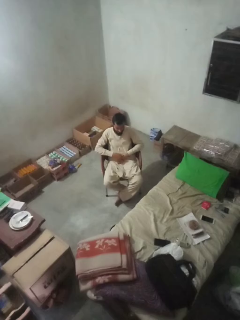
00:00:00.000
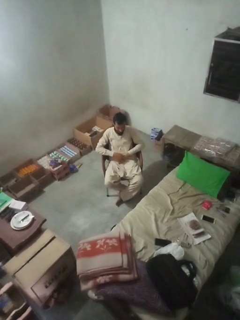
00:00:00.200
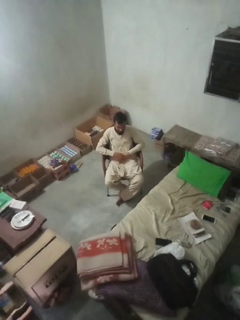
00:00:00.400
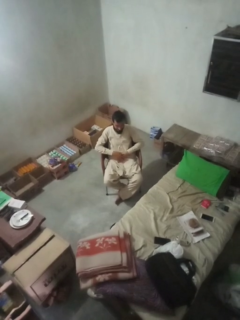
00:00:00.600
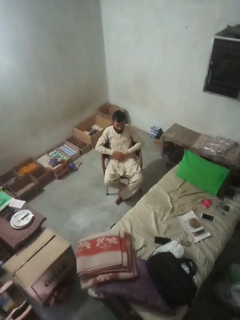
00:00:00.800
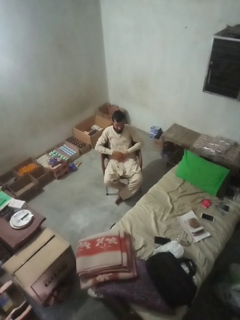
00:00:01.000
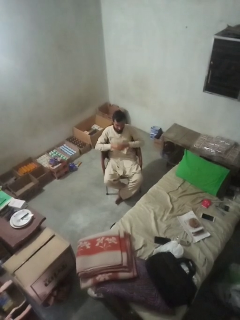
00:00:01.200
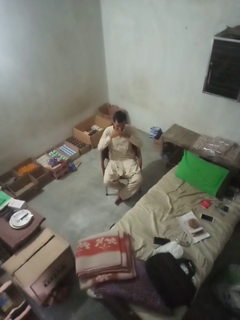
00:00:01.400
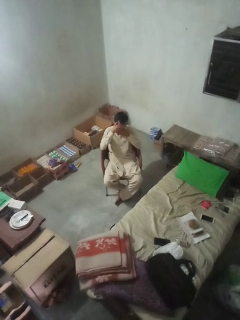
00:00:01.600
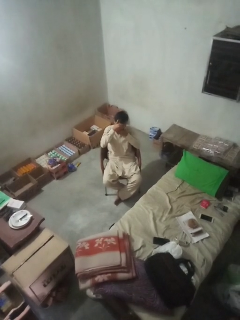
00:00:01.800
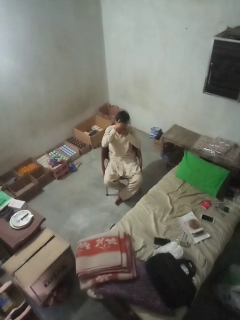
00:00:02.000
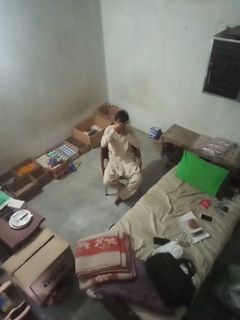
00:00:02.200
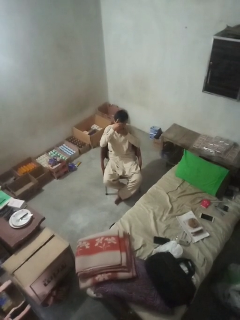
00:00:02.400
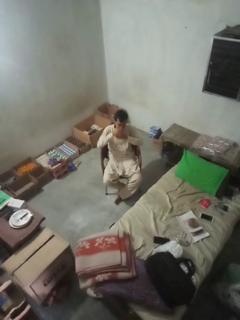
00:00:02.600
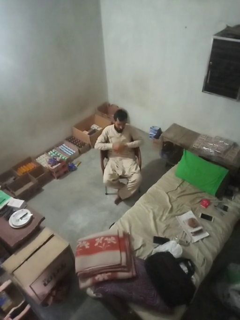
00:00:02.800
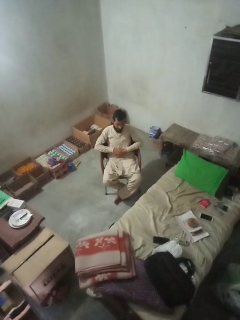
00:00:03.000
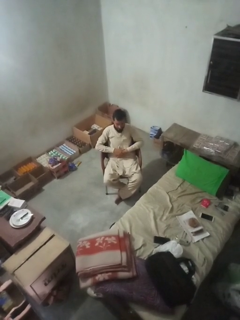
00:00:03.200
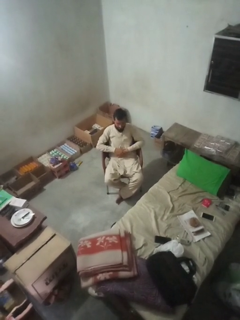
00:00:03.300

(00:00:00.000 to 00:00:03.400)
person covers face with hands

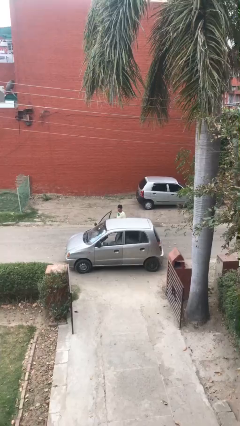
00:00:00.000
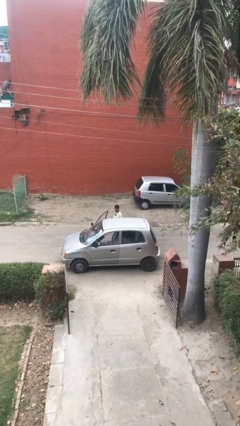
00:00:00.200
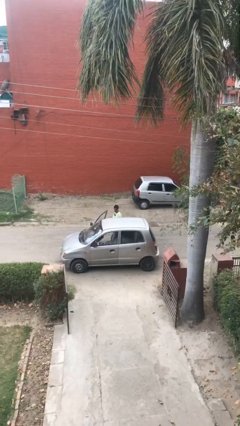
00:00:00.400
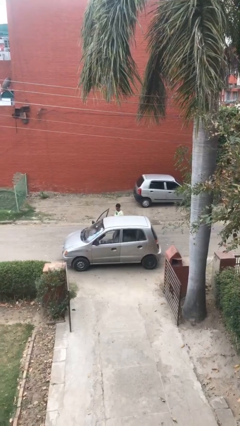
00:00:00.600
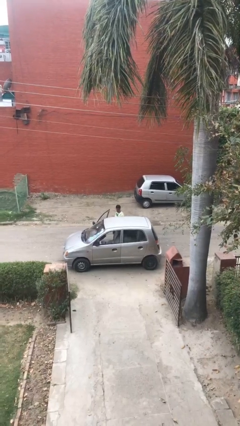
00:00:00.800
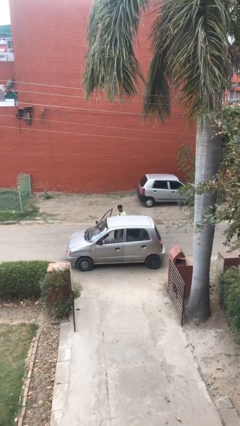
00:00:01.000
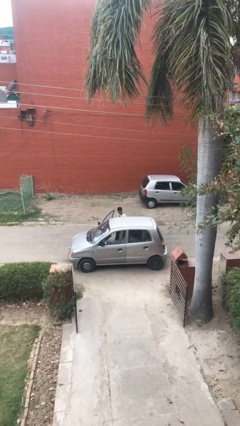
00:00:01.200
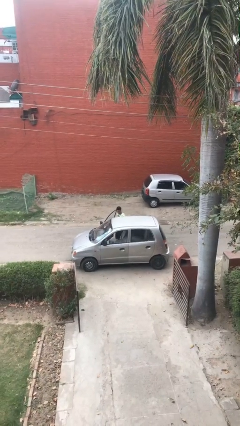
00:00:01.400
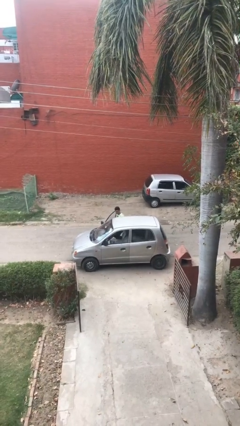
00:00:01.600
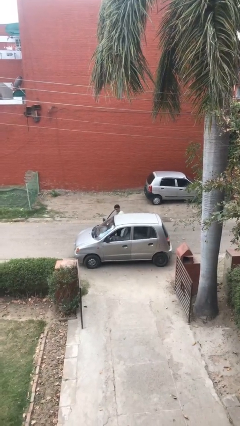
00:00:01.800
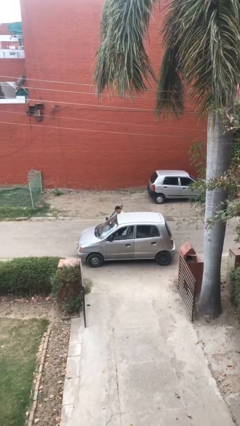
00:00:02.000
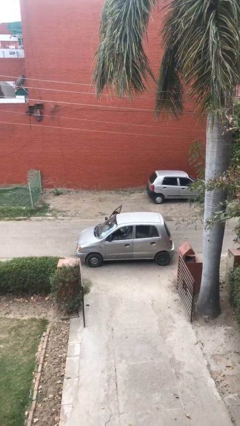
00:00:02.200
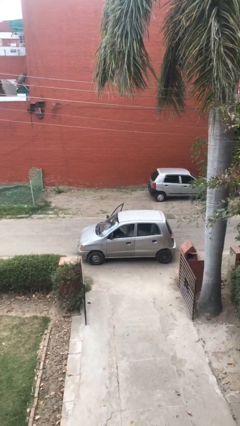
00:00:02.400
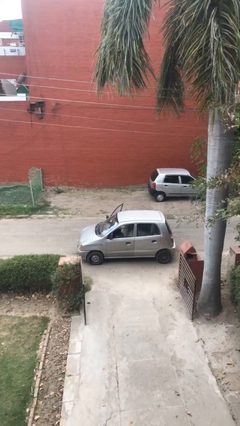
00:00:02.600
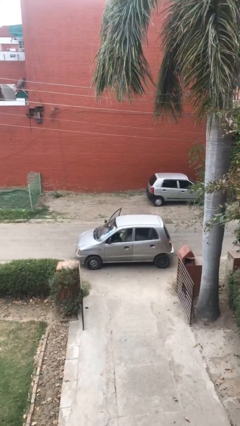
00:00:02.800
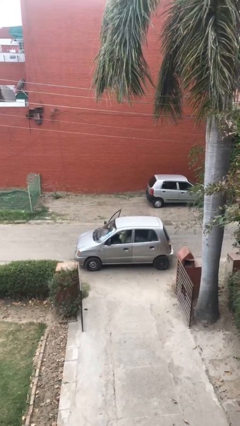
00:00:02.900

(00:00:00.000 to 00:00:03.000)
person enters car

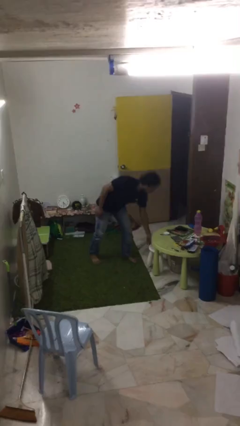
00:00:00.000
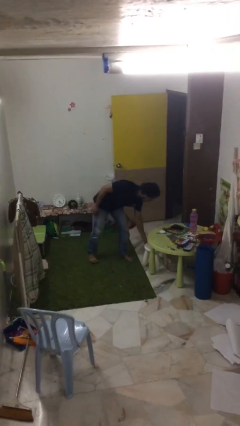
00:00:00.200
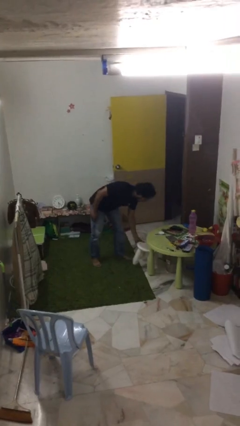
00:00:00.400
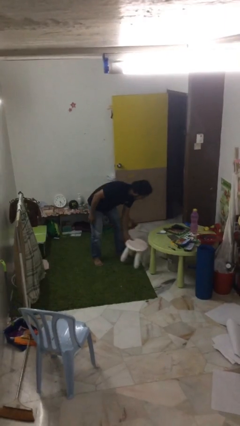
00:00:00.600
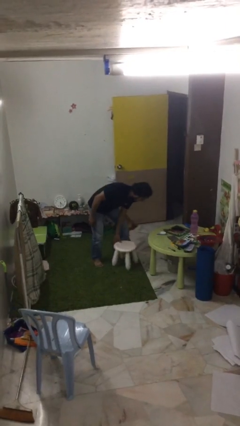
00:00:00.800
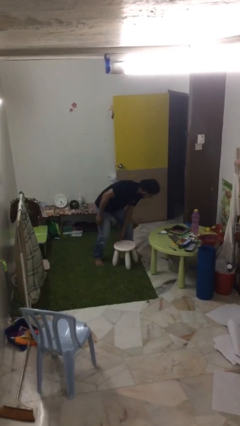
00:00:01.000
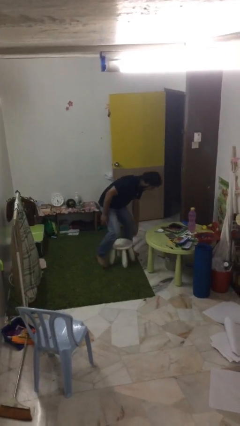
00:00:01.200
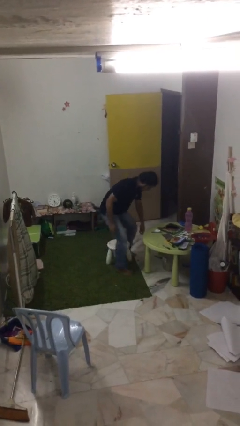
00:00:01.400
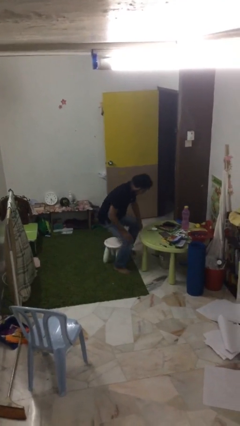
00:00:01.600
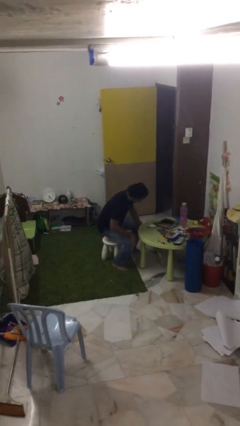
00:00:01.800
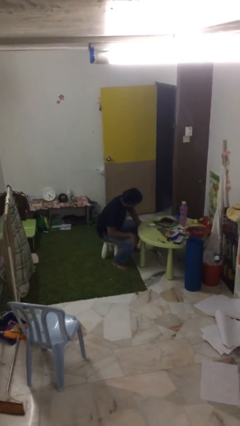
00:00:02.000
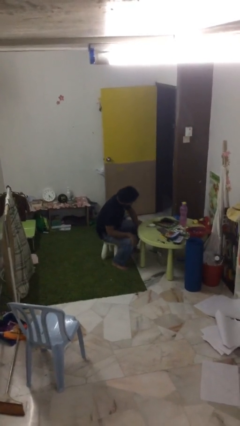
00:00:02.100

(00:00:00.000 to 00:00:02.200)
person sits down

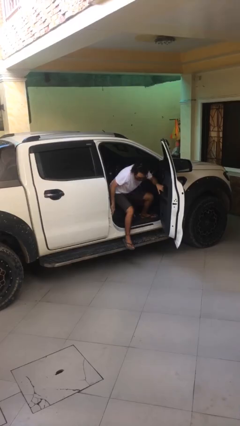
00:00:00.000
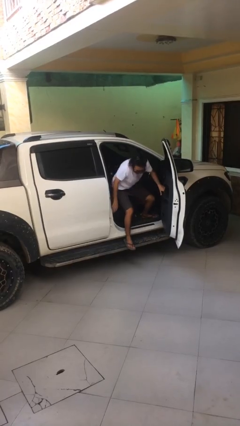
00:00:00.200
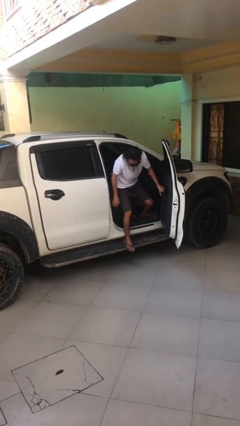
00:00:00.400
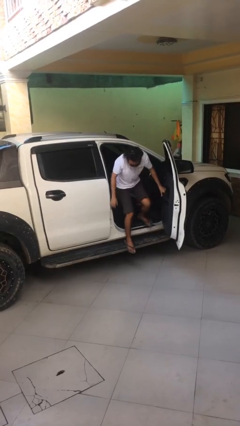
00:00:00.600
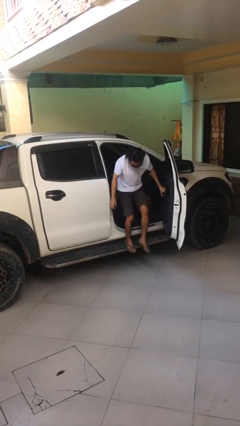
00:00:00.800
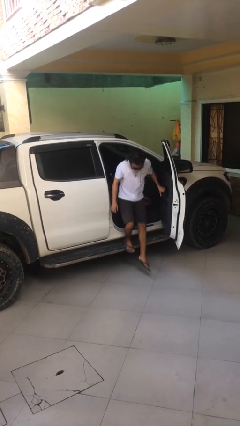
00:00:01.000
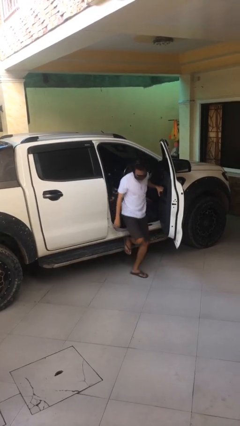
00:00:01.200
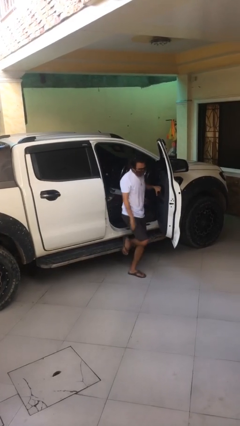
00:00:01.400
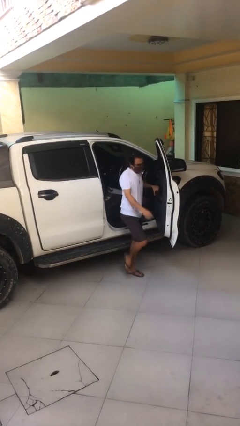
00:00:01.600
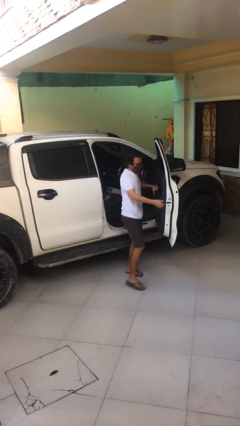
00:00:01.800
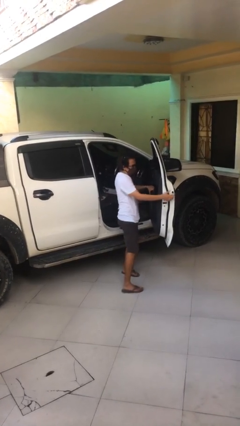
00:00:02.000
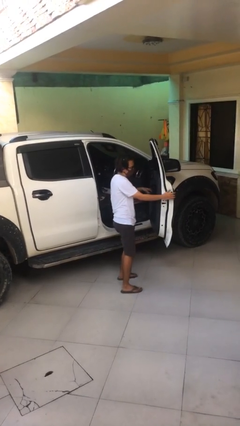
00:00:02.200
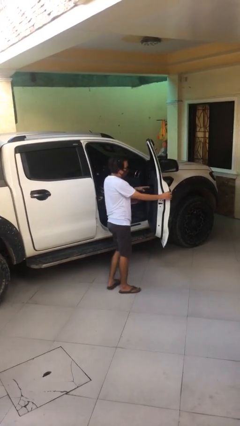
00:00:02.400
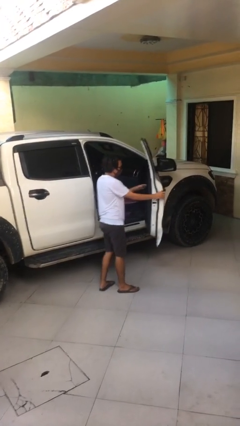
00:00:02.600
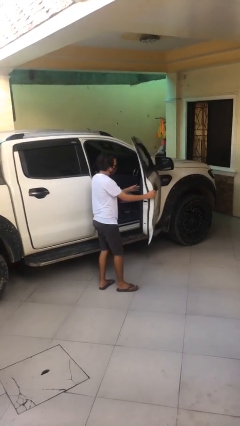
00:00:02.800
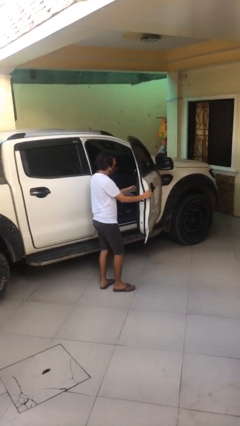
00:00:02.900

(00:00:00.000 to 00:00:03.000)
person exits car

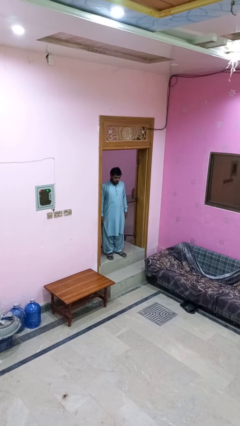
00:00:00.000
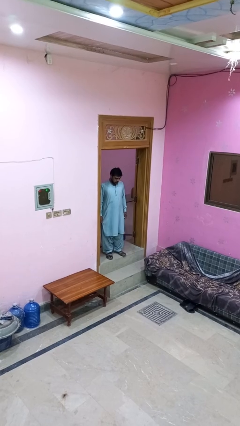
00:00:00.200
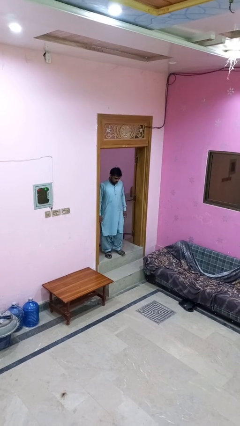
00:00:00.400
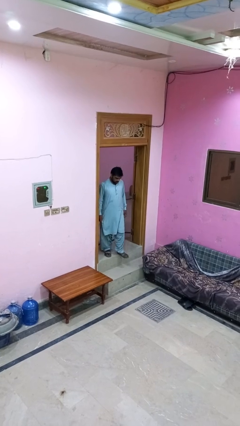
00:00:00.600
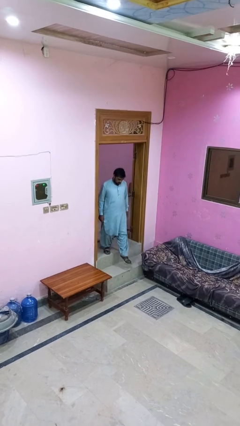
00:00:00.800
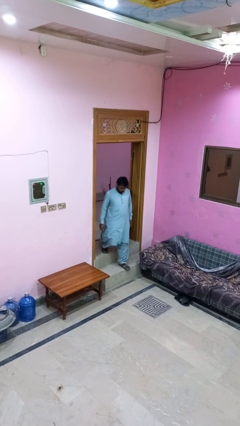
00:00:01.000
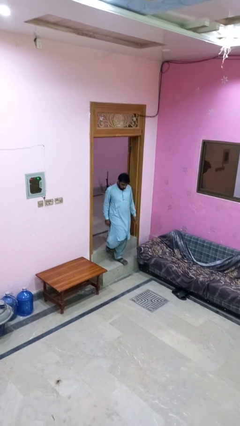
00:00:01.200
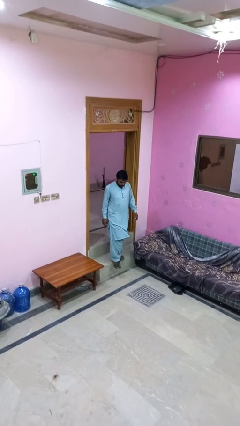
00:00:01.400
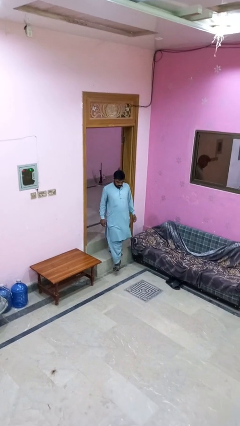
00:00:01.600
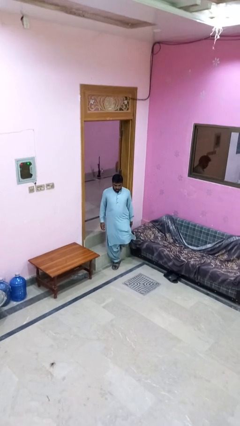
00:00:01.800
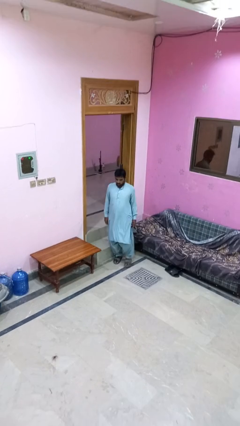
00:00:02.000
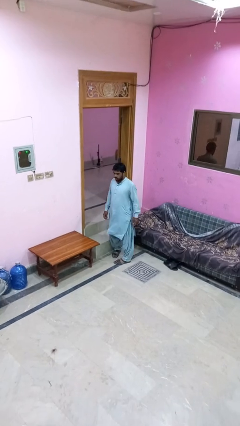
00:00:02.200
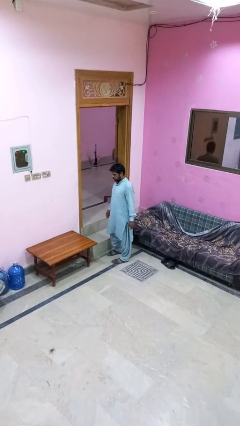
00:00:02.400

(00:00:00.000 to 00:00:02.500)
person climbs down stairs

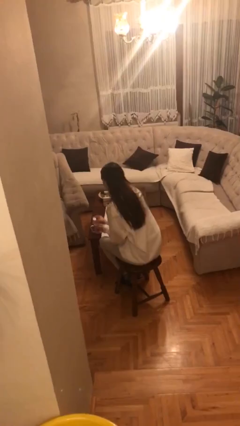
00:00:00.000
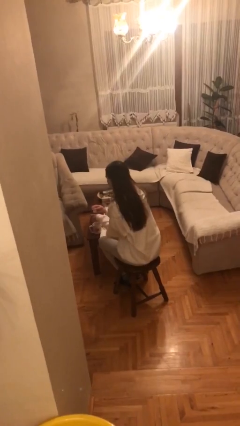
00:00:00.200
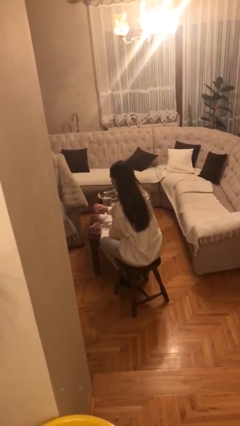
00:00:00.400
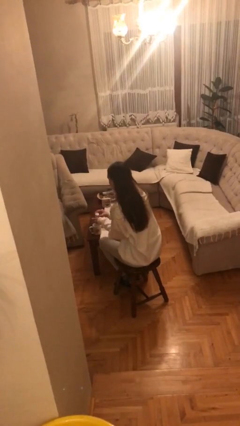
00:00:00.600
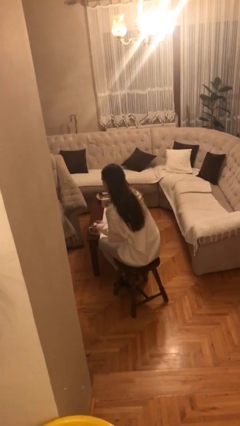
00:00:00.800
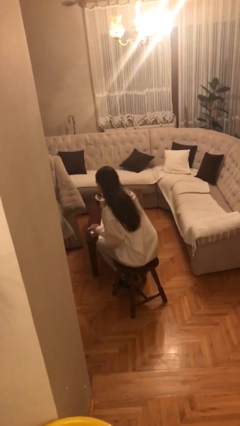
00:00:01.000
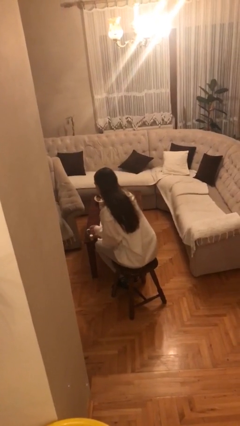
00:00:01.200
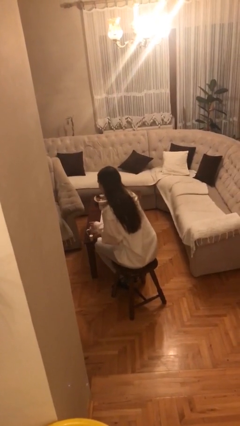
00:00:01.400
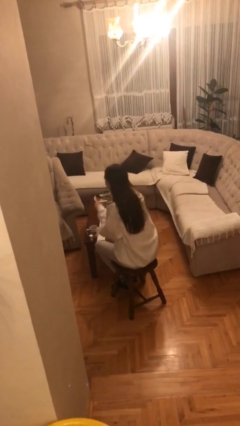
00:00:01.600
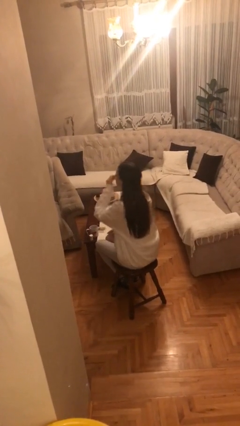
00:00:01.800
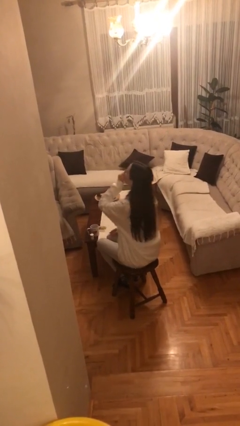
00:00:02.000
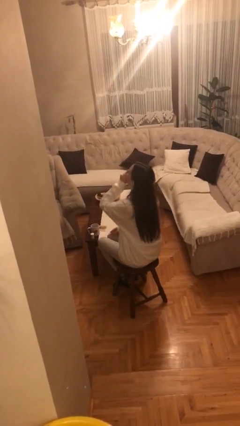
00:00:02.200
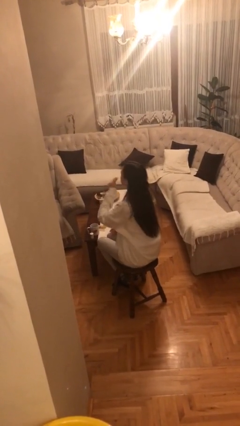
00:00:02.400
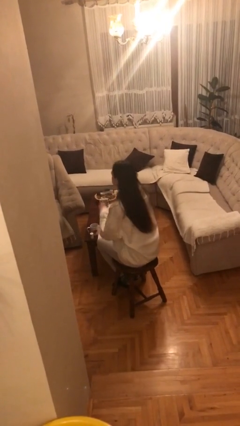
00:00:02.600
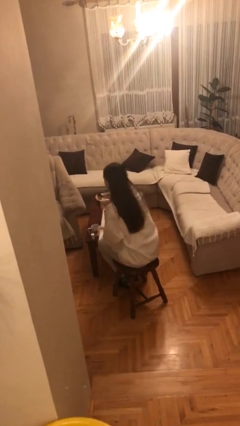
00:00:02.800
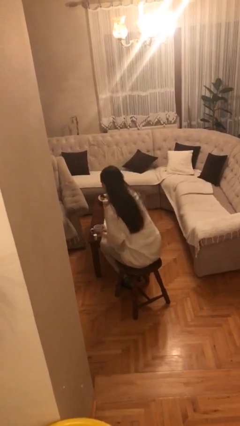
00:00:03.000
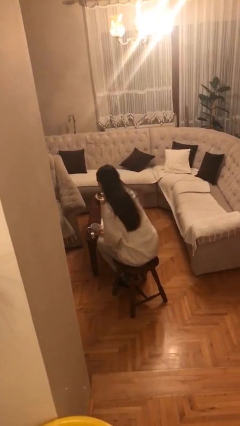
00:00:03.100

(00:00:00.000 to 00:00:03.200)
person takes medicine pills

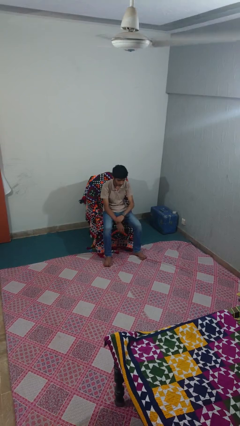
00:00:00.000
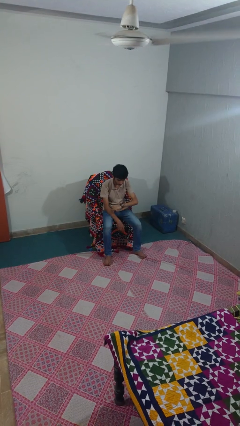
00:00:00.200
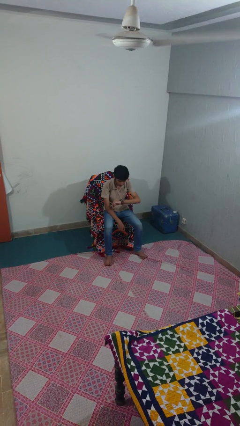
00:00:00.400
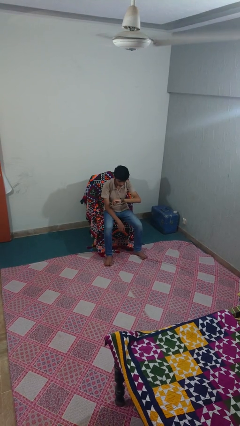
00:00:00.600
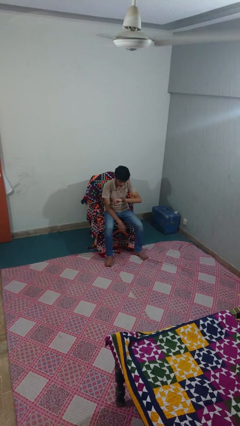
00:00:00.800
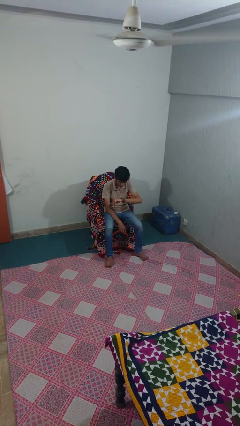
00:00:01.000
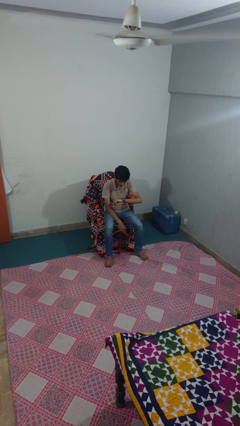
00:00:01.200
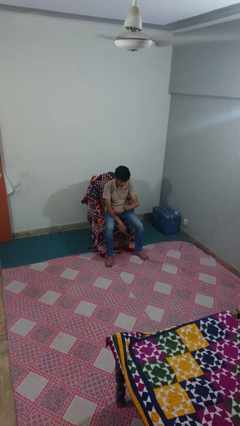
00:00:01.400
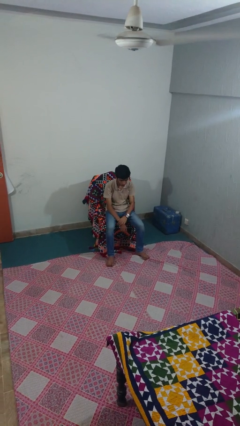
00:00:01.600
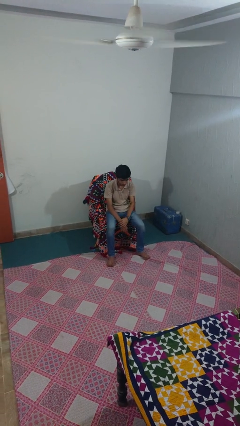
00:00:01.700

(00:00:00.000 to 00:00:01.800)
person looks at wristwatch
